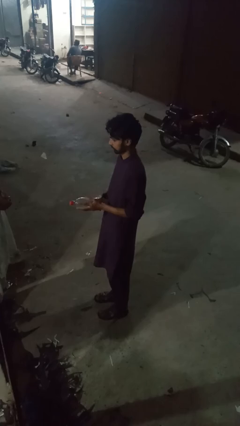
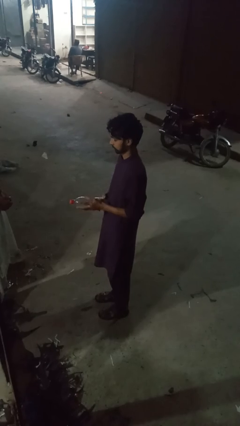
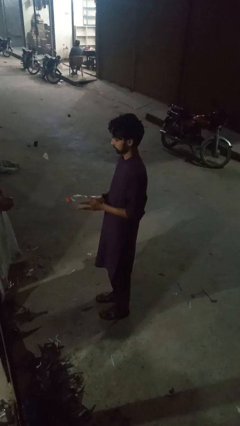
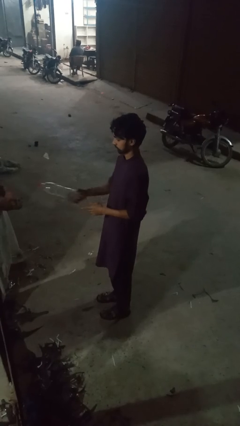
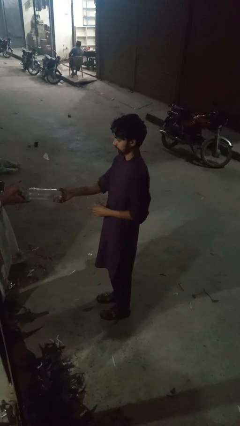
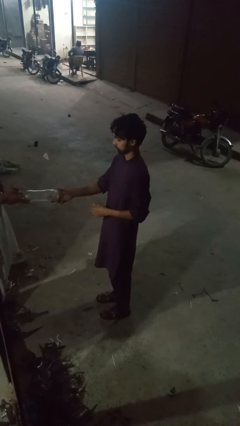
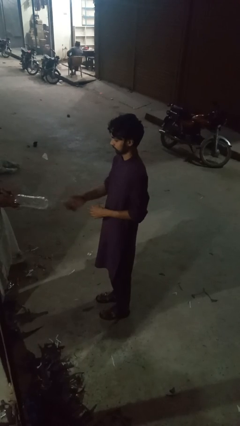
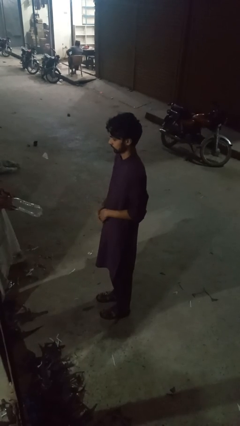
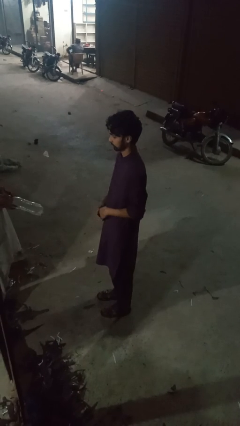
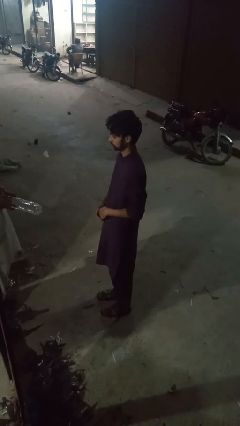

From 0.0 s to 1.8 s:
person throws object to person

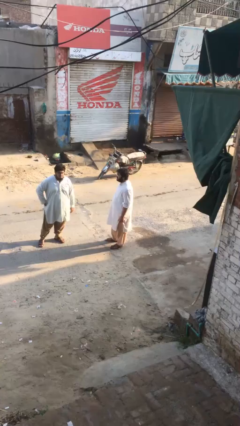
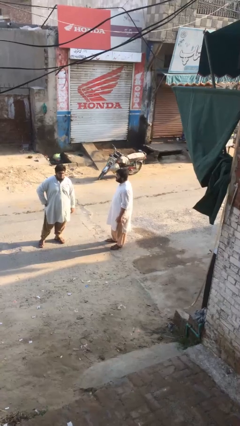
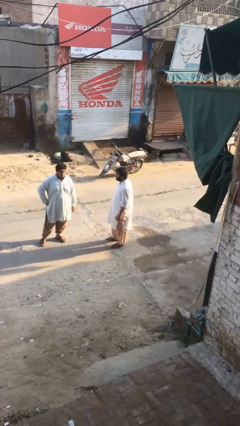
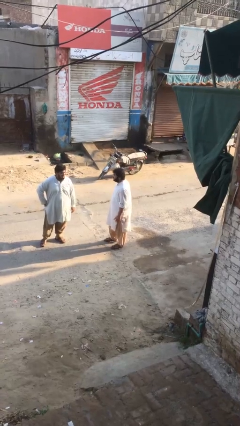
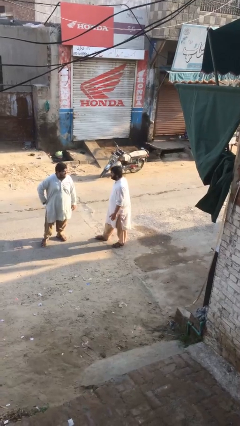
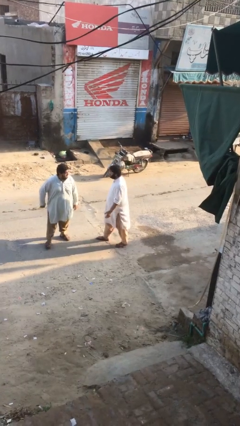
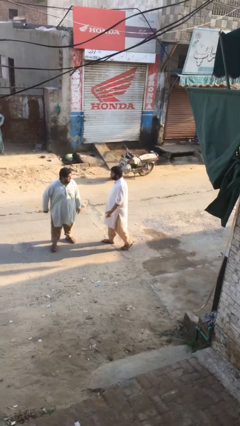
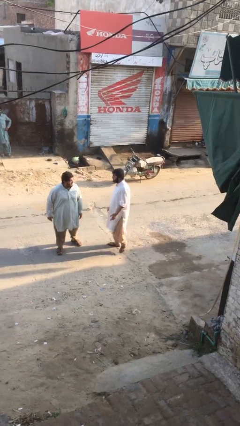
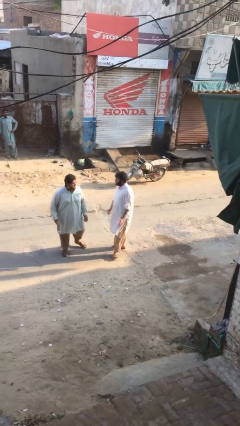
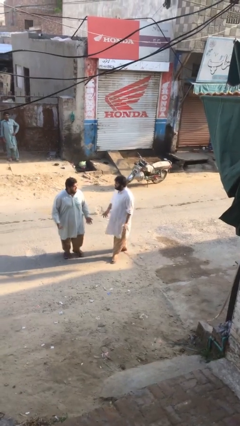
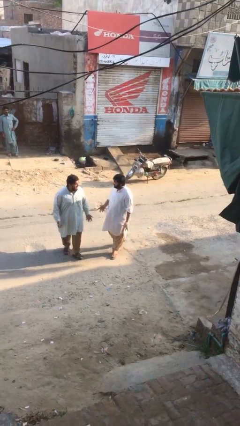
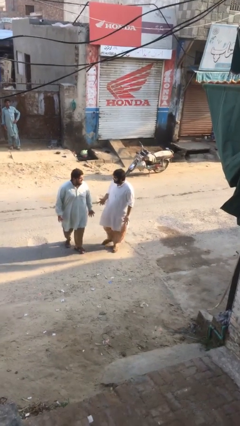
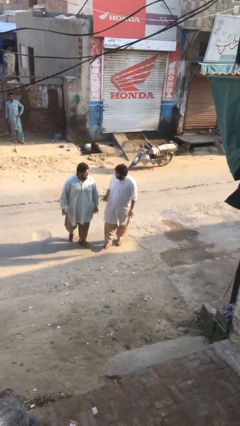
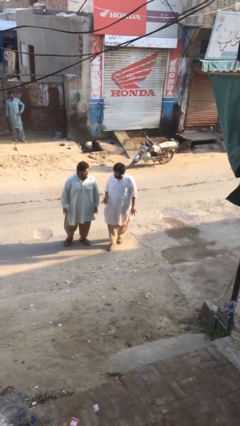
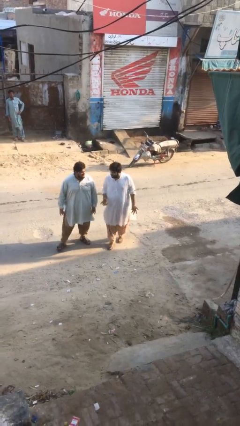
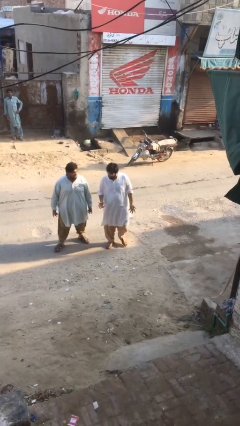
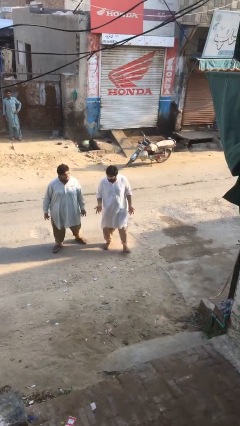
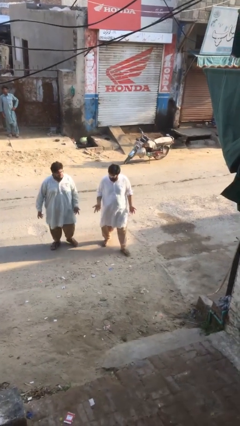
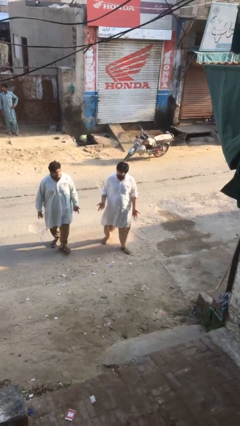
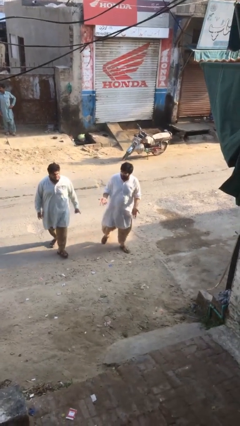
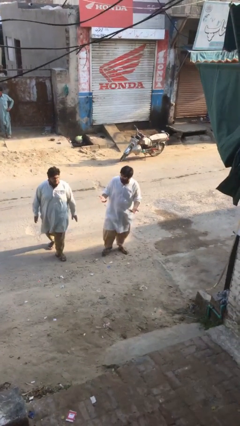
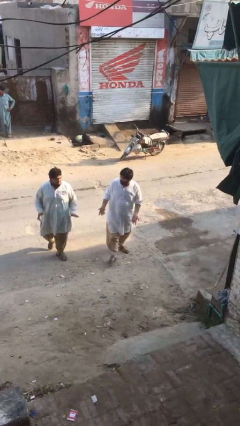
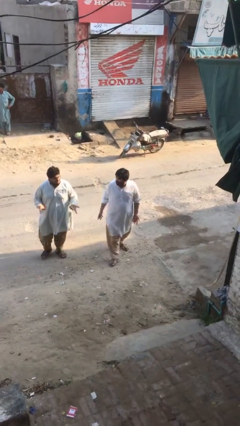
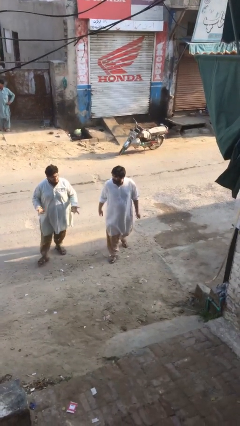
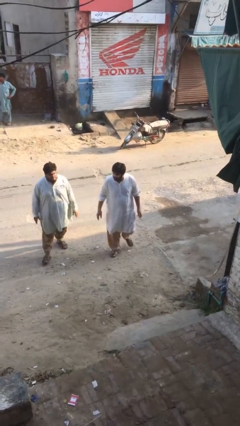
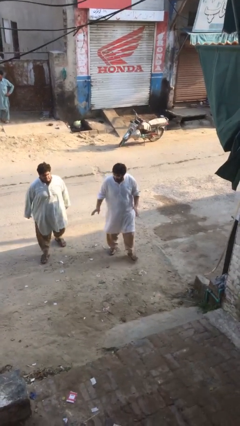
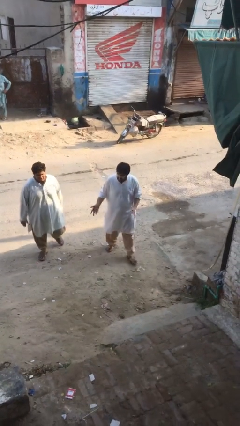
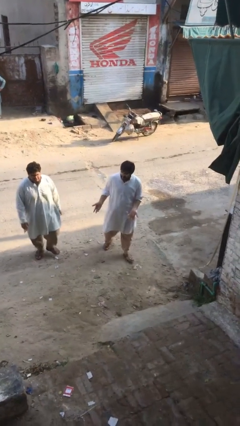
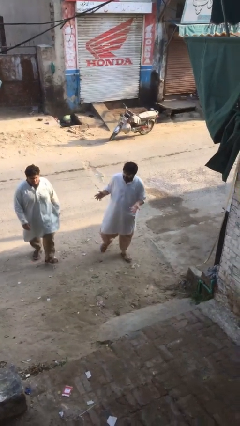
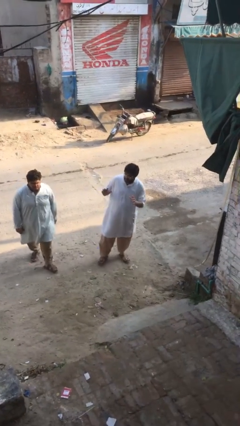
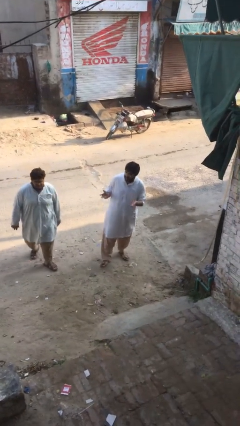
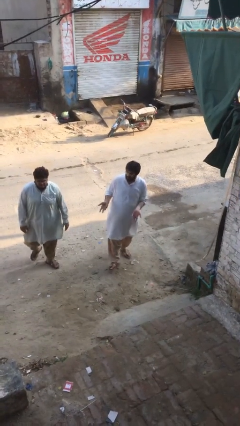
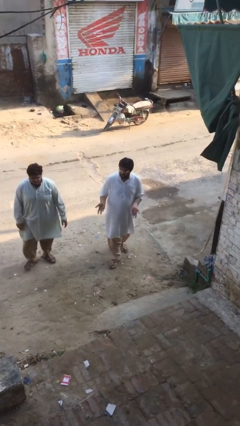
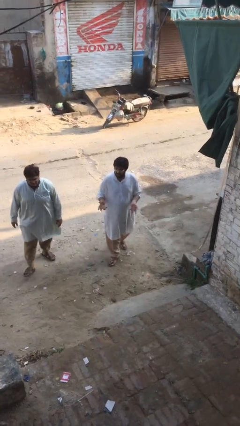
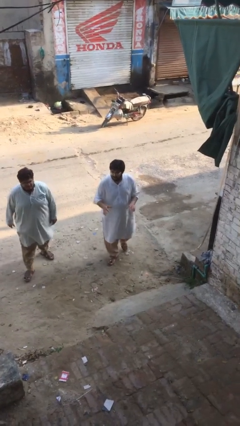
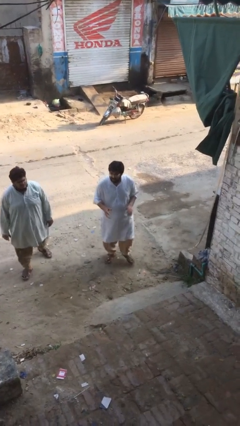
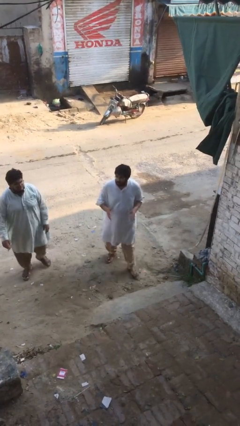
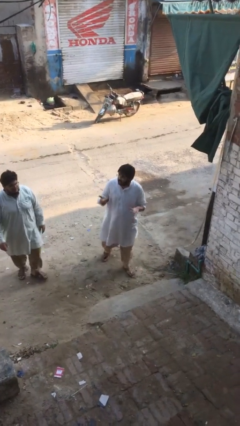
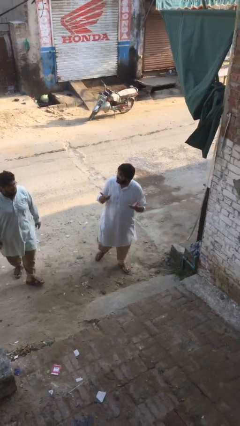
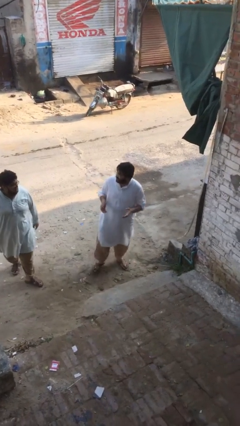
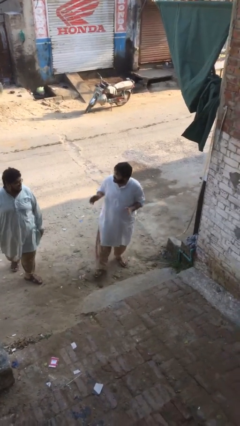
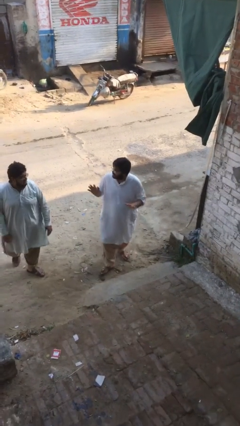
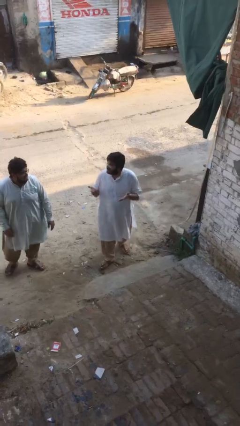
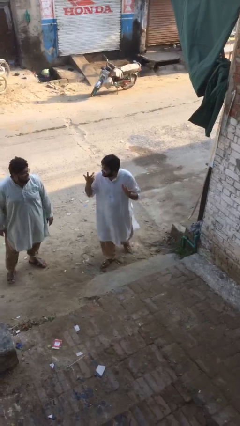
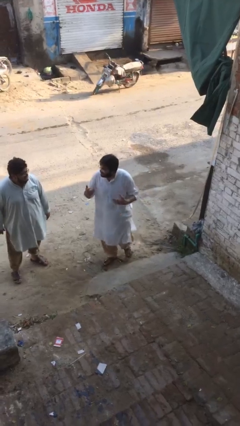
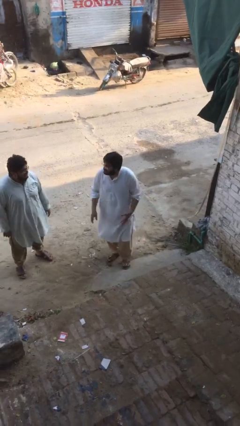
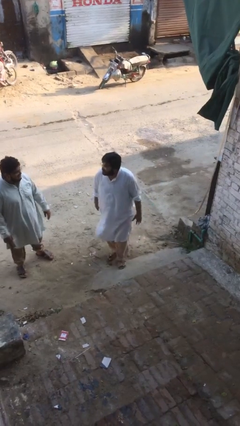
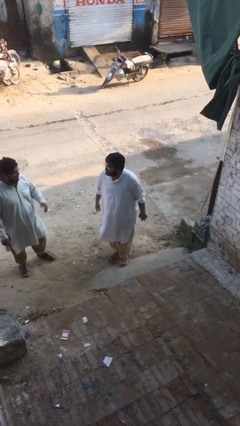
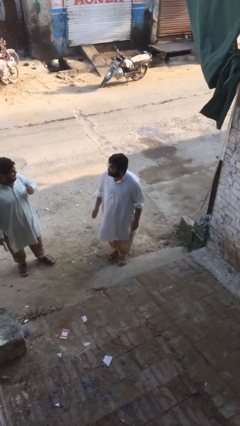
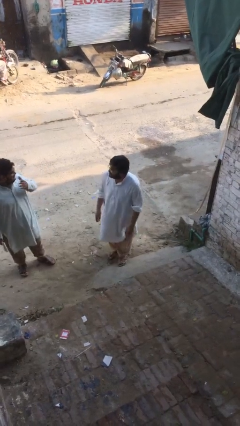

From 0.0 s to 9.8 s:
person talks to person

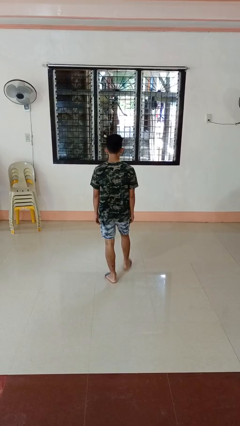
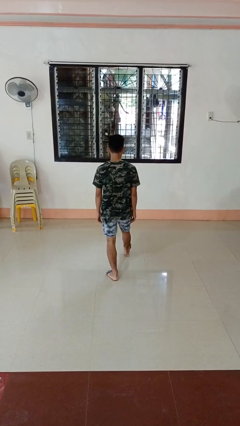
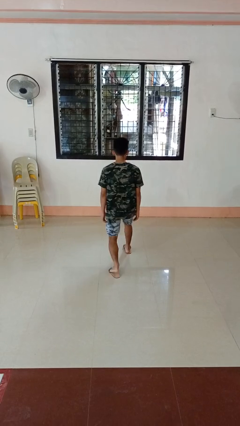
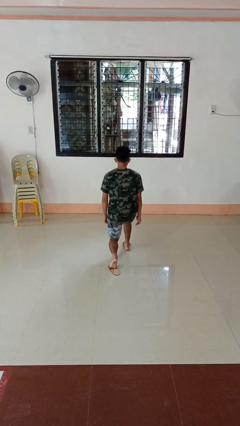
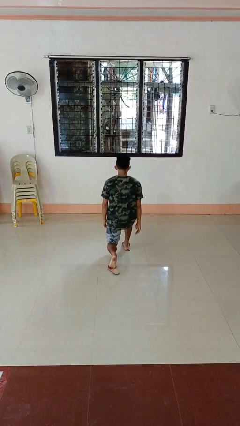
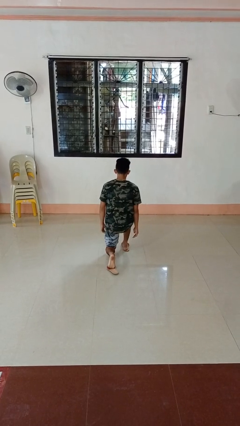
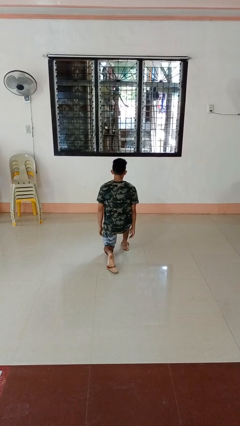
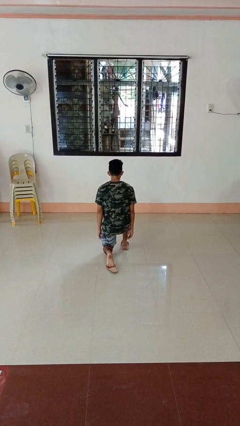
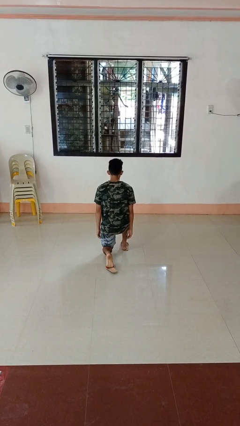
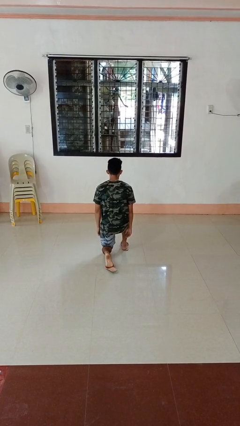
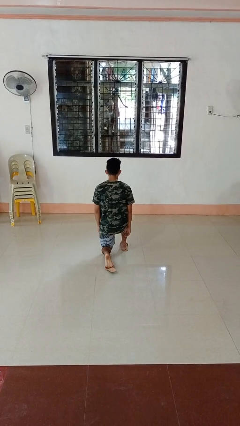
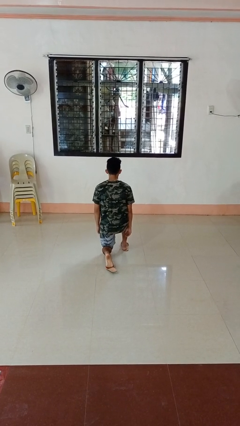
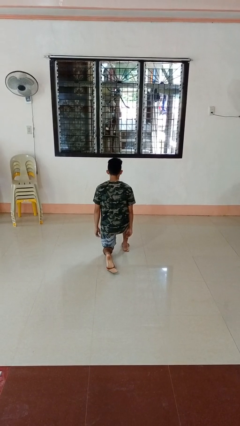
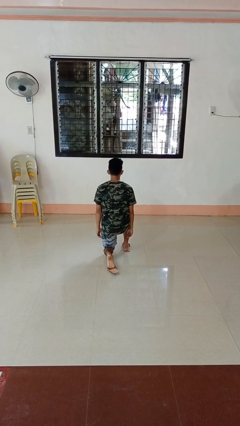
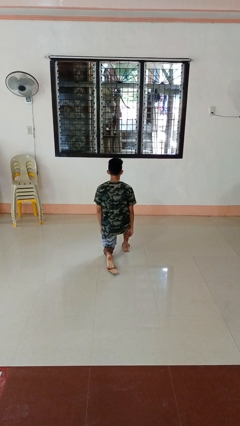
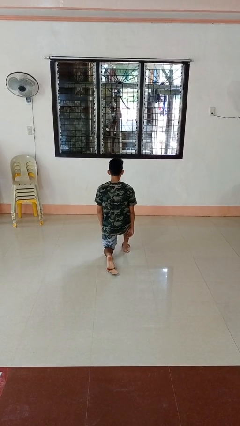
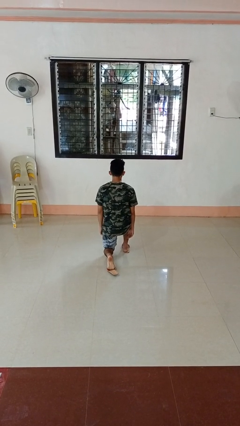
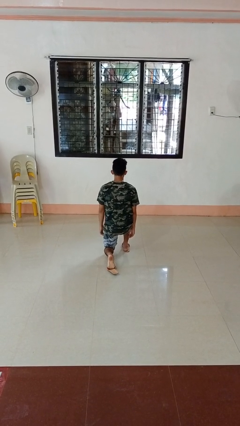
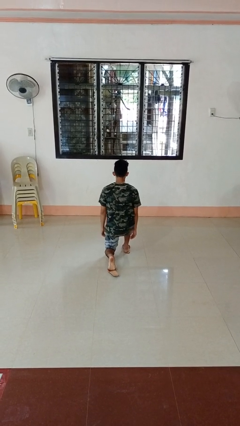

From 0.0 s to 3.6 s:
person kneels

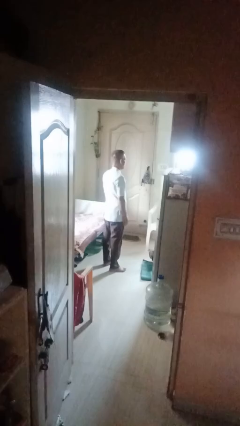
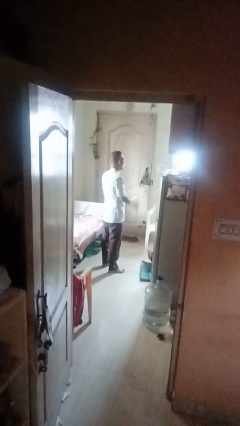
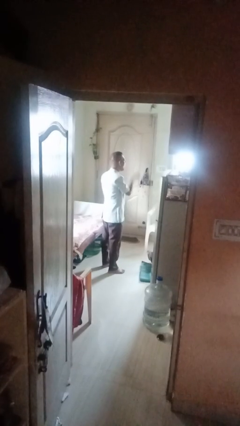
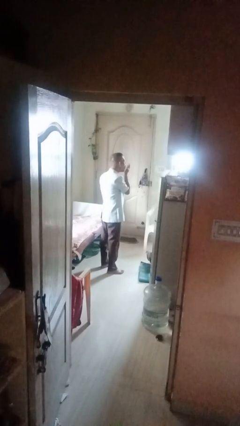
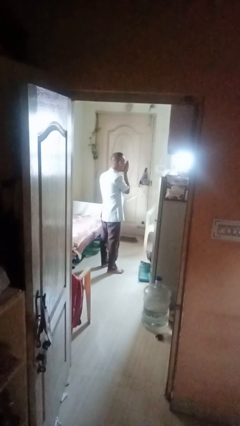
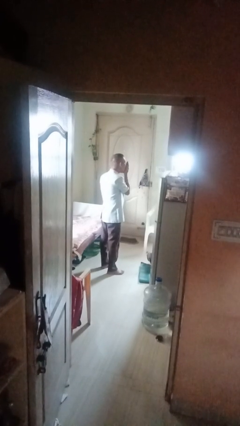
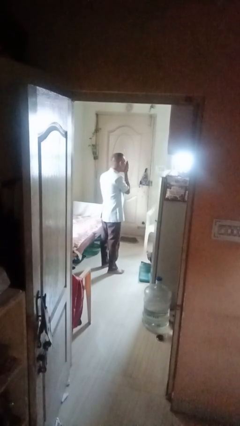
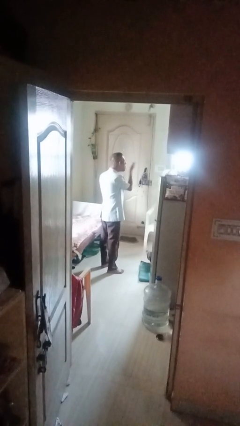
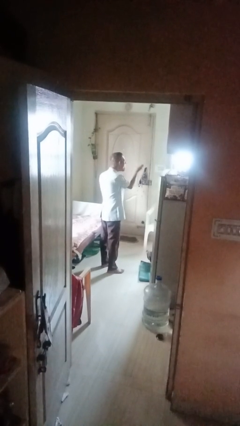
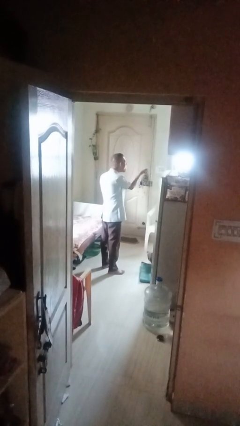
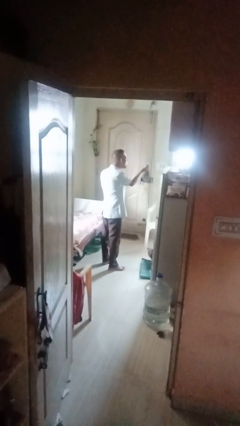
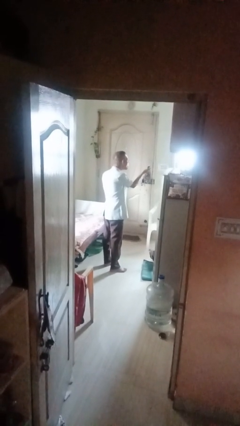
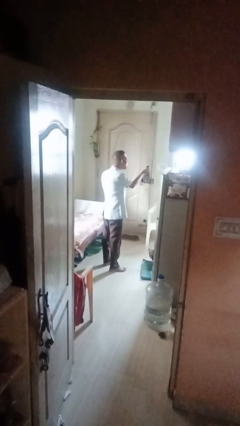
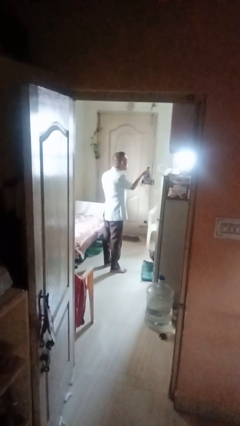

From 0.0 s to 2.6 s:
person gestures blow kiss
